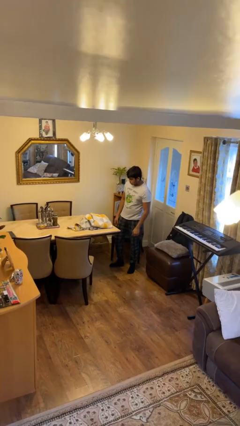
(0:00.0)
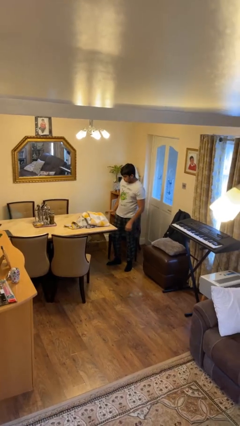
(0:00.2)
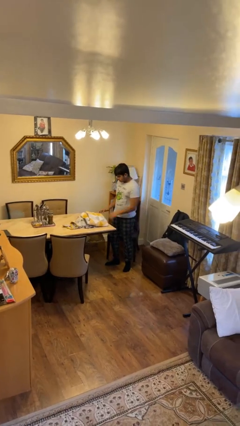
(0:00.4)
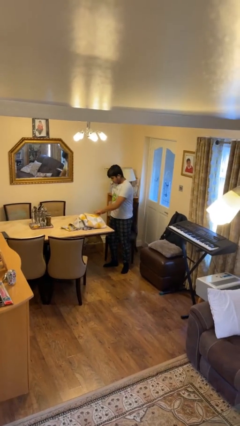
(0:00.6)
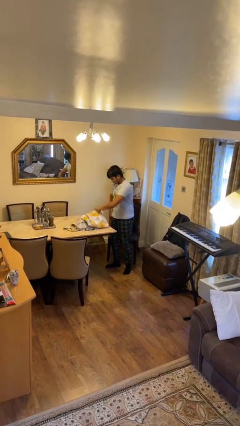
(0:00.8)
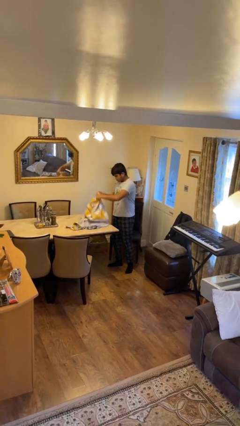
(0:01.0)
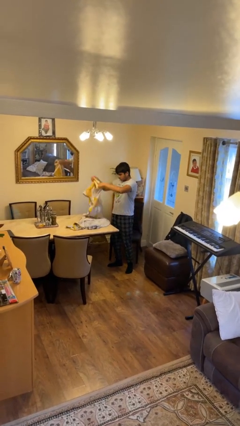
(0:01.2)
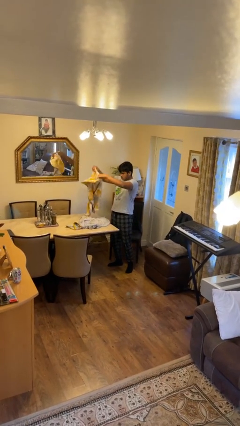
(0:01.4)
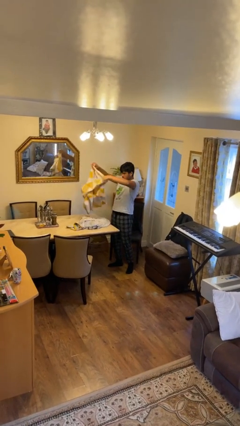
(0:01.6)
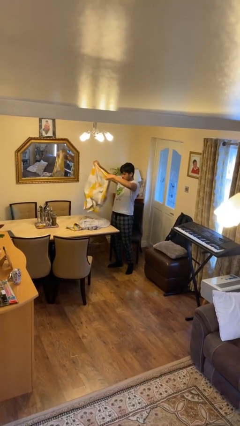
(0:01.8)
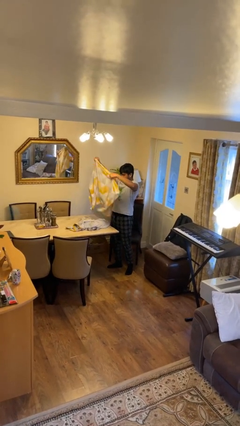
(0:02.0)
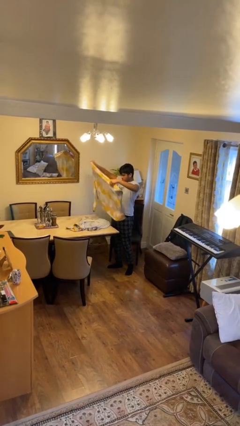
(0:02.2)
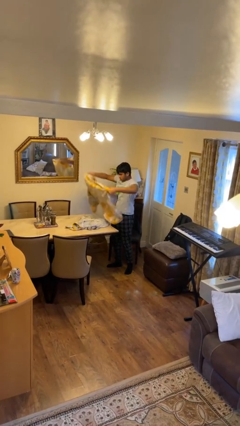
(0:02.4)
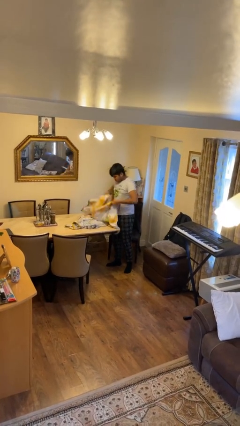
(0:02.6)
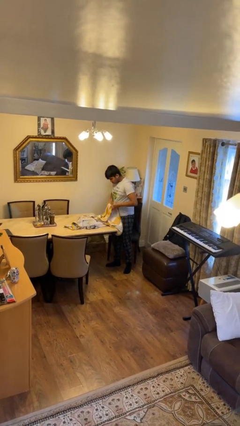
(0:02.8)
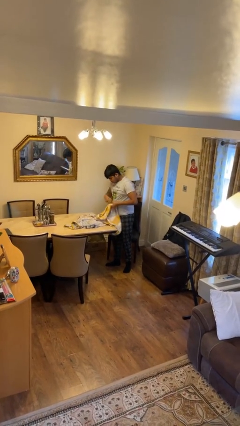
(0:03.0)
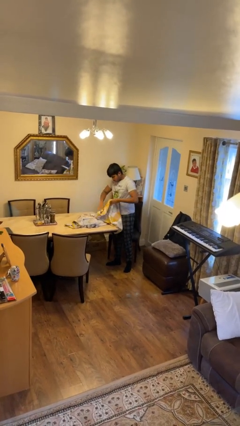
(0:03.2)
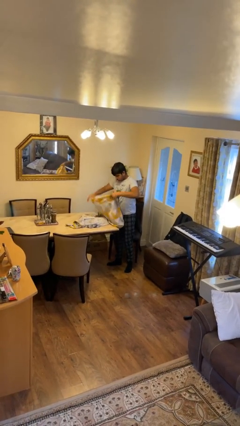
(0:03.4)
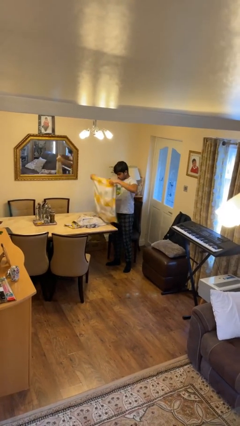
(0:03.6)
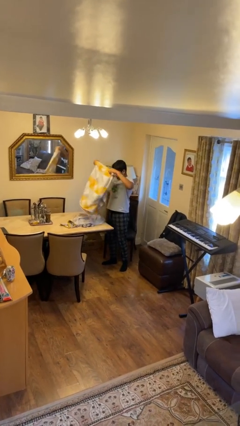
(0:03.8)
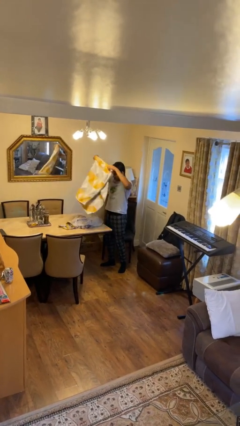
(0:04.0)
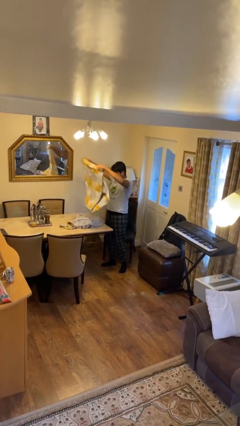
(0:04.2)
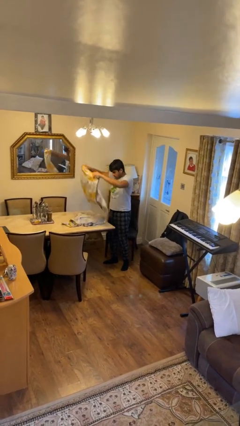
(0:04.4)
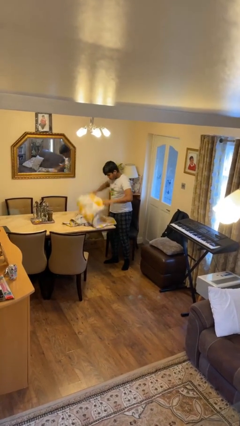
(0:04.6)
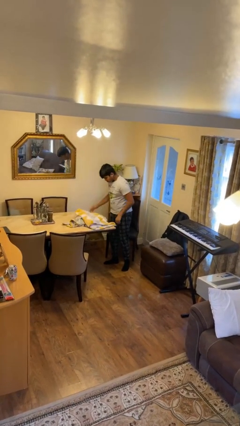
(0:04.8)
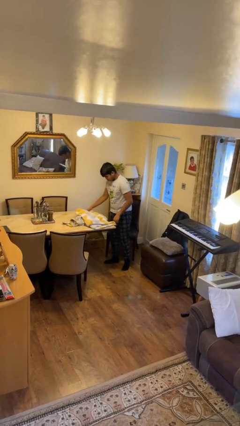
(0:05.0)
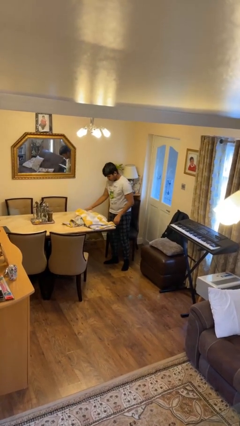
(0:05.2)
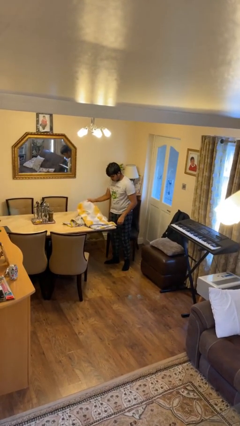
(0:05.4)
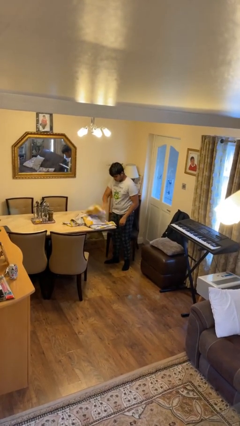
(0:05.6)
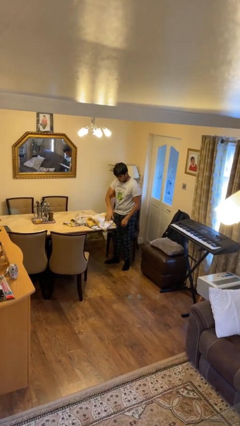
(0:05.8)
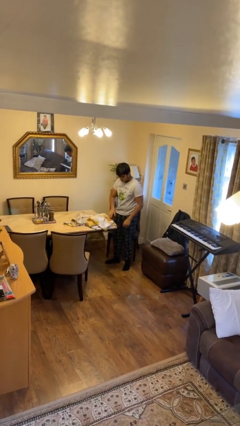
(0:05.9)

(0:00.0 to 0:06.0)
person folds towel

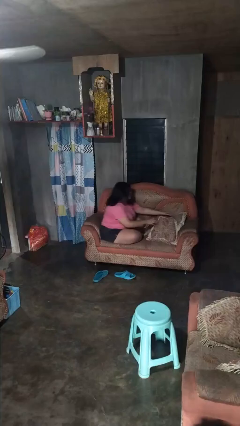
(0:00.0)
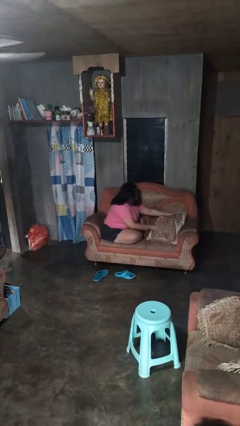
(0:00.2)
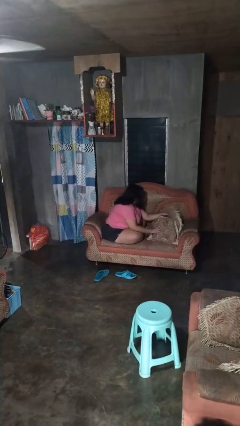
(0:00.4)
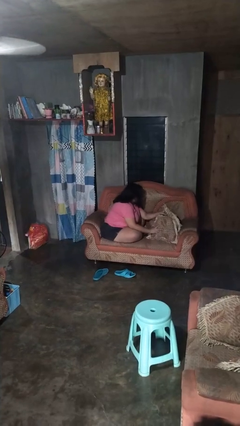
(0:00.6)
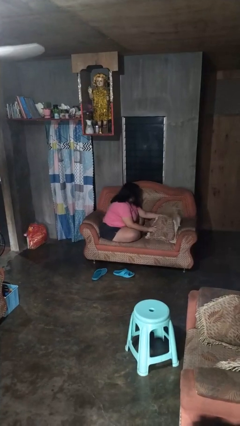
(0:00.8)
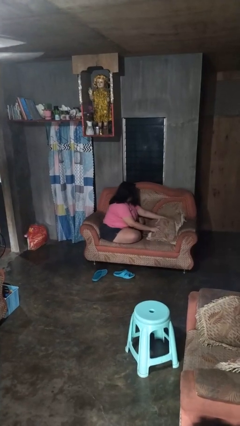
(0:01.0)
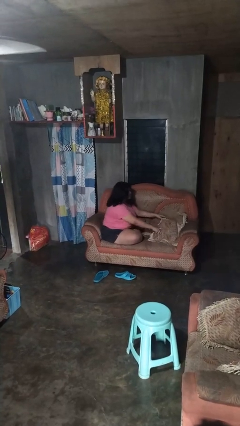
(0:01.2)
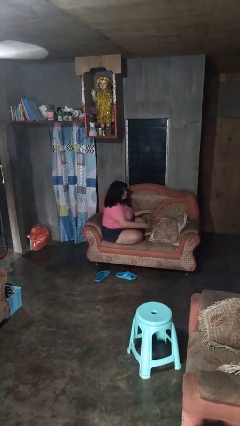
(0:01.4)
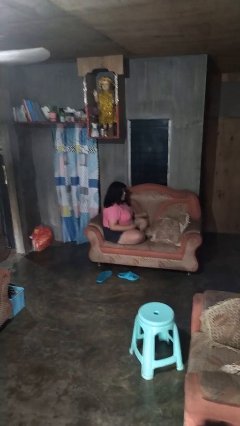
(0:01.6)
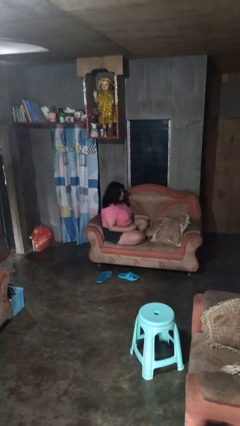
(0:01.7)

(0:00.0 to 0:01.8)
person searches in couch

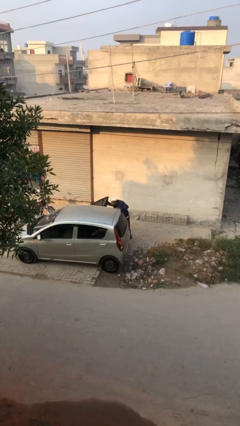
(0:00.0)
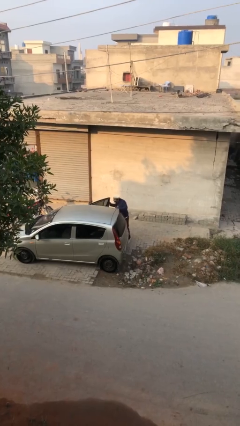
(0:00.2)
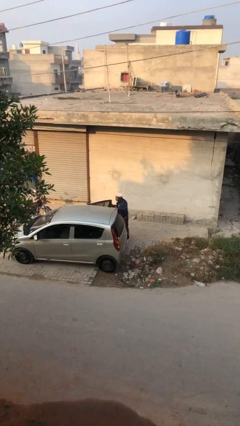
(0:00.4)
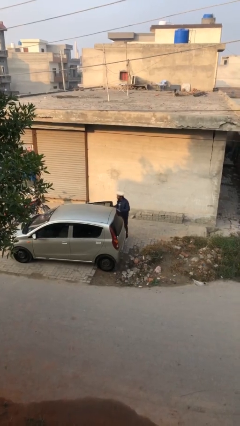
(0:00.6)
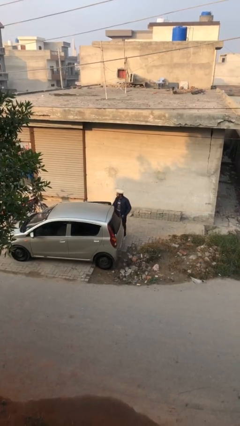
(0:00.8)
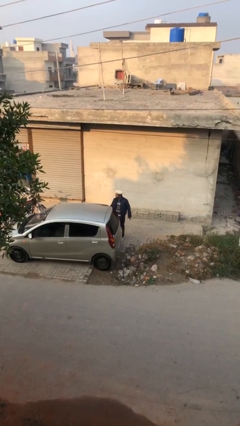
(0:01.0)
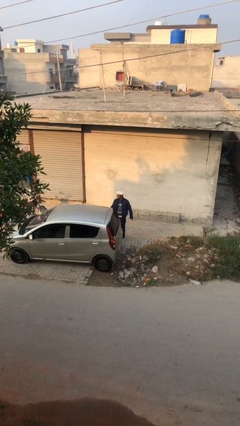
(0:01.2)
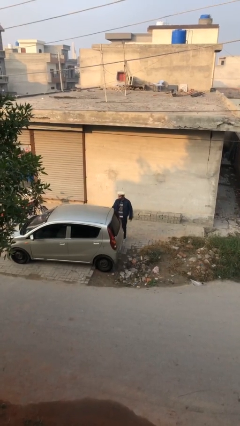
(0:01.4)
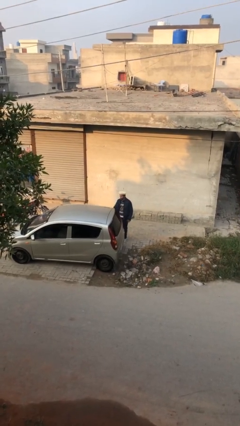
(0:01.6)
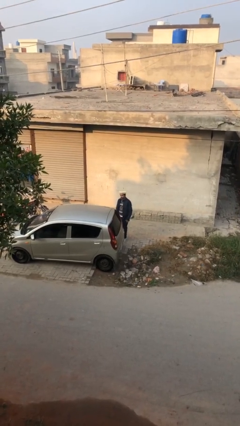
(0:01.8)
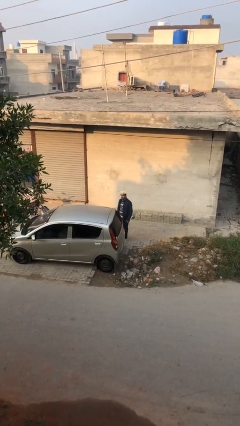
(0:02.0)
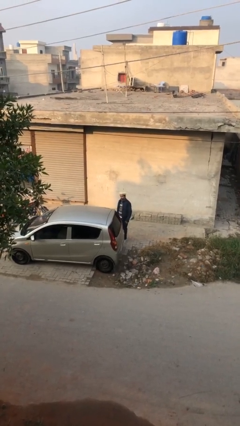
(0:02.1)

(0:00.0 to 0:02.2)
person closes car door

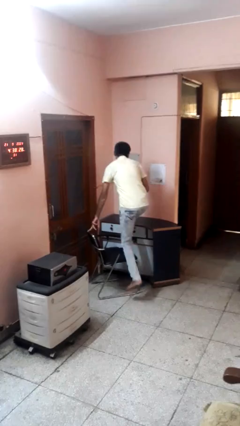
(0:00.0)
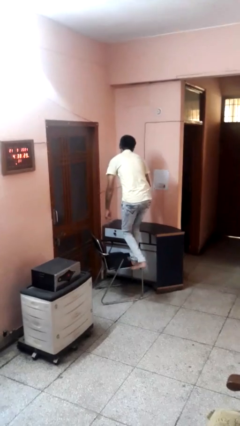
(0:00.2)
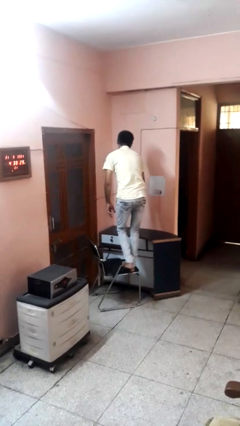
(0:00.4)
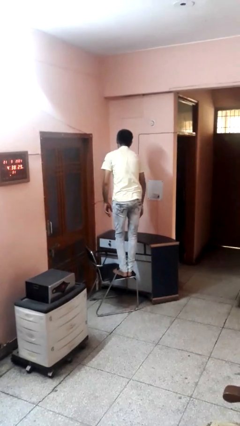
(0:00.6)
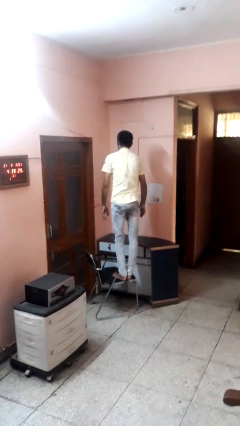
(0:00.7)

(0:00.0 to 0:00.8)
person climbs on chair

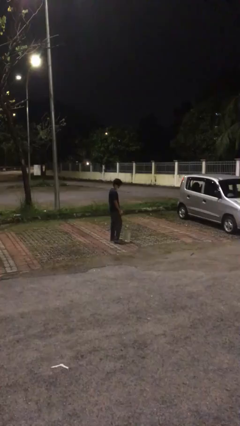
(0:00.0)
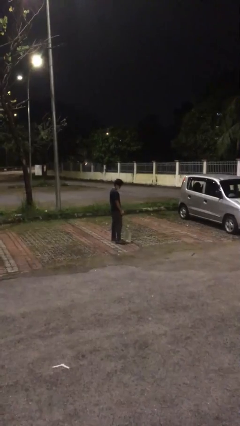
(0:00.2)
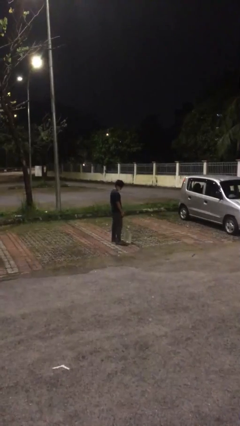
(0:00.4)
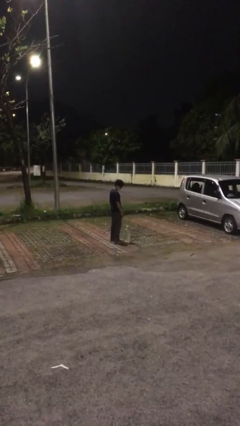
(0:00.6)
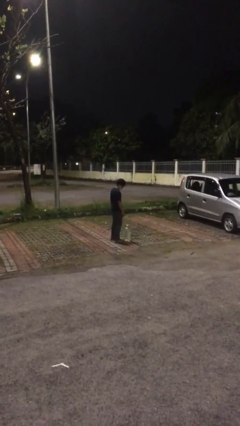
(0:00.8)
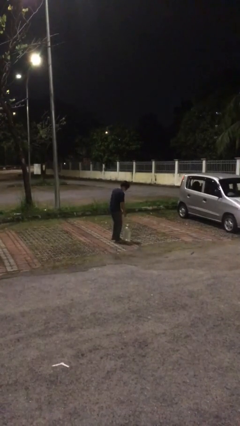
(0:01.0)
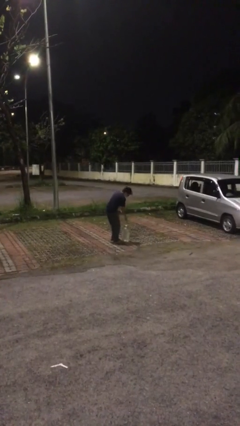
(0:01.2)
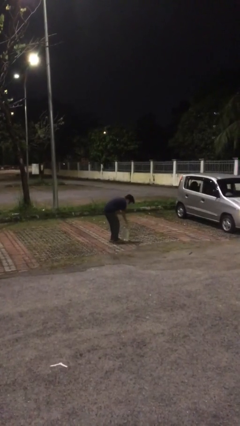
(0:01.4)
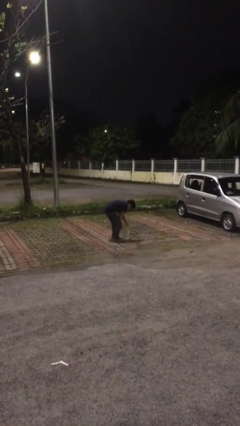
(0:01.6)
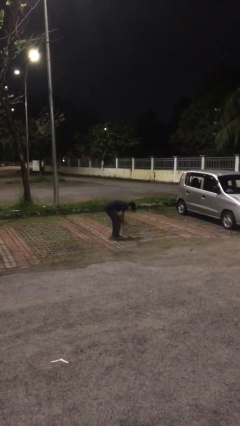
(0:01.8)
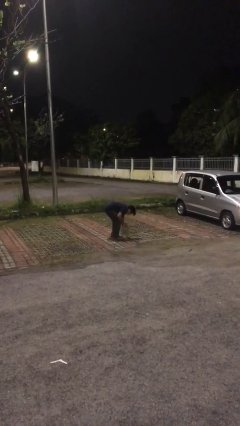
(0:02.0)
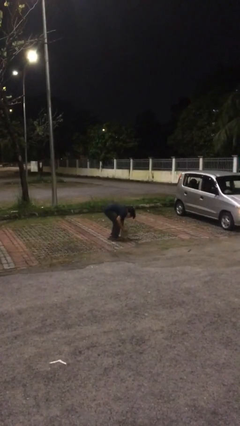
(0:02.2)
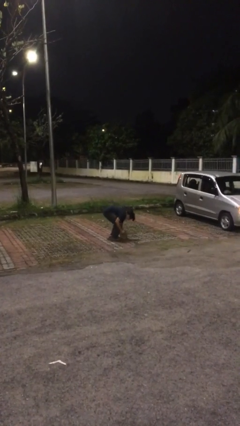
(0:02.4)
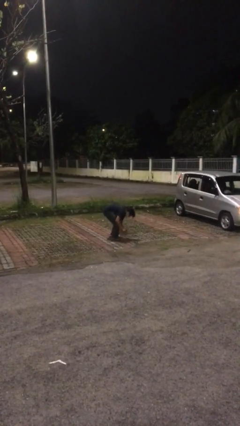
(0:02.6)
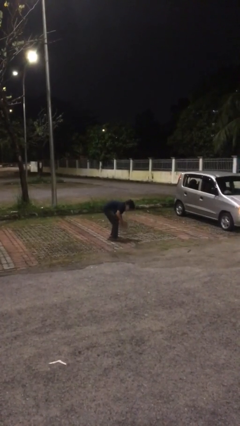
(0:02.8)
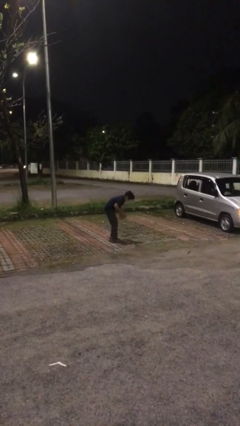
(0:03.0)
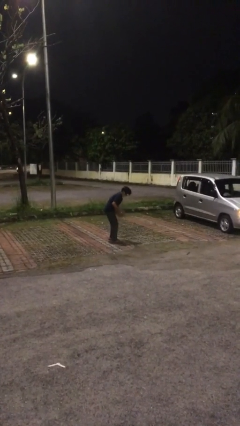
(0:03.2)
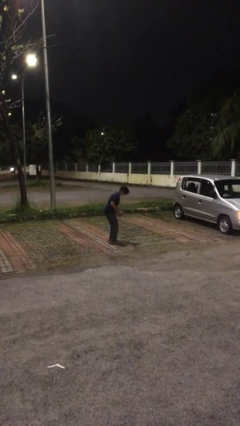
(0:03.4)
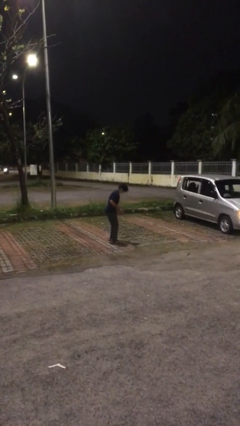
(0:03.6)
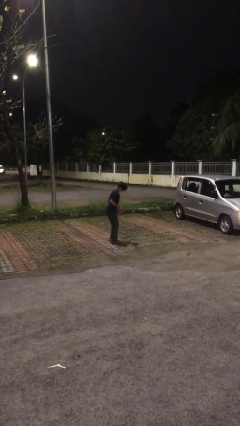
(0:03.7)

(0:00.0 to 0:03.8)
person picks up object from floor

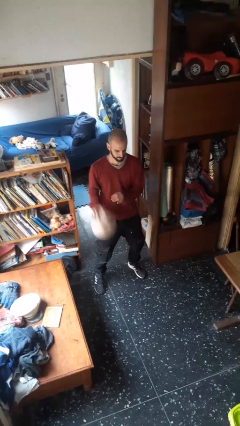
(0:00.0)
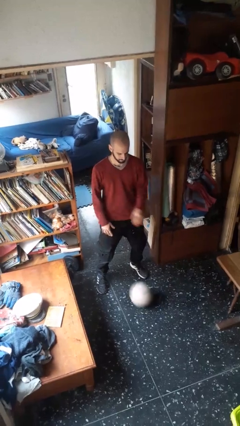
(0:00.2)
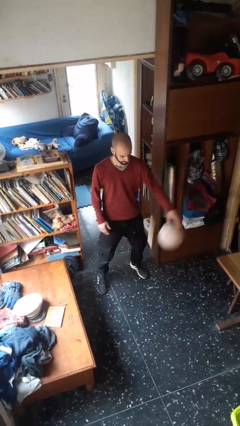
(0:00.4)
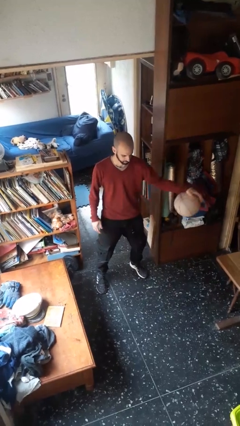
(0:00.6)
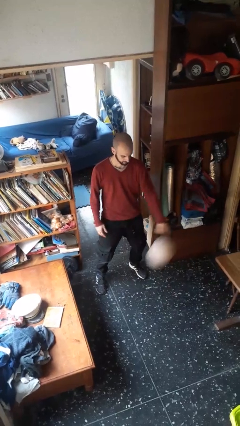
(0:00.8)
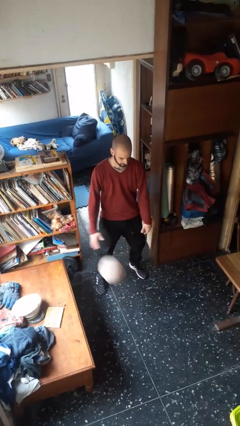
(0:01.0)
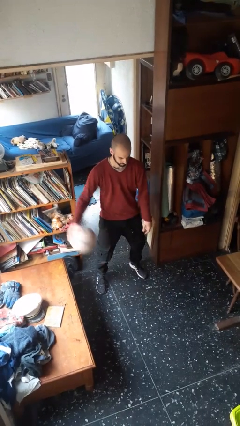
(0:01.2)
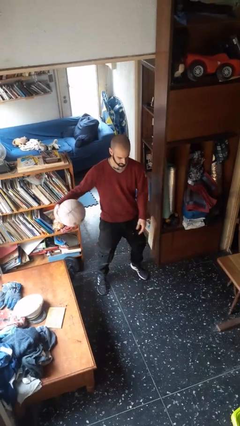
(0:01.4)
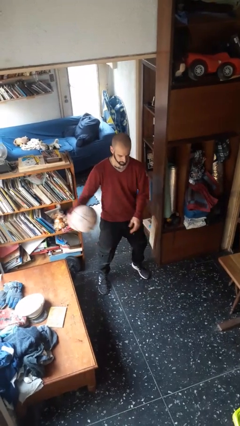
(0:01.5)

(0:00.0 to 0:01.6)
person bounces ball on floor

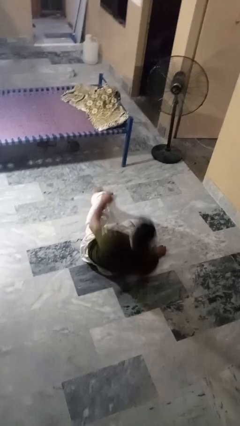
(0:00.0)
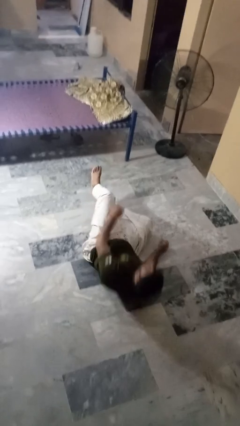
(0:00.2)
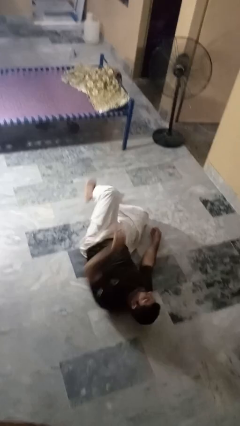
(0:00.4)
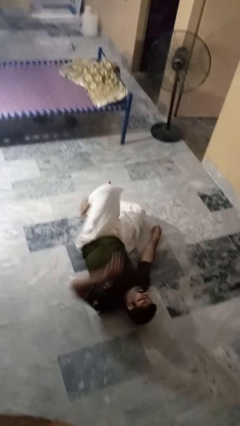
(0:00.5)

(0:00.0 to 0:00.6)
person stands up from floor
